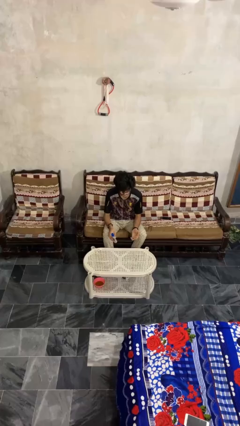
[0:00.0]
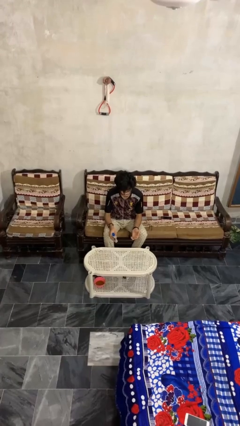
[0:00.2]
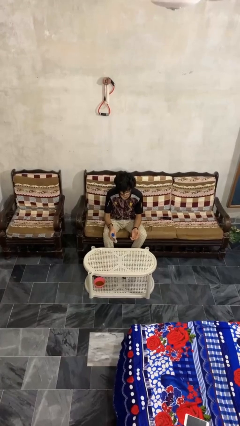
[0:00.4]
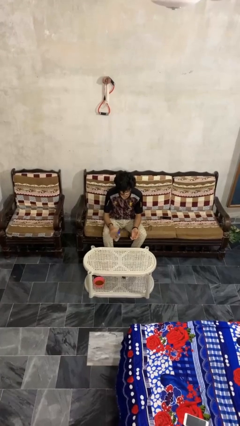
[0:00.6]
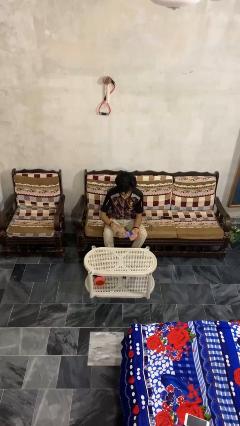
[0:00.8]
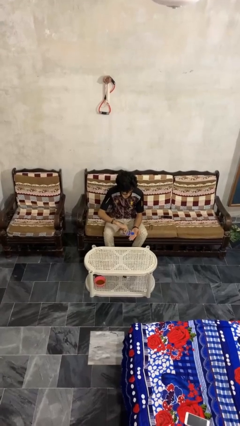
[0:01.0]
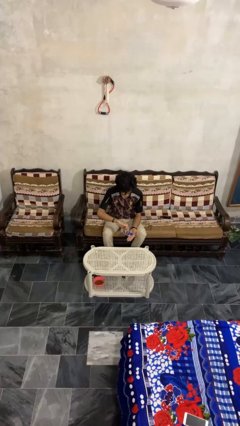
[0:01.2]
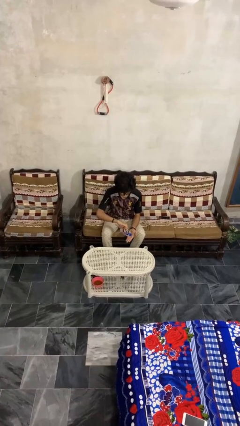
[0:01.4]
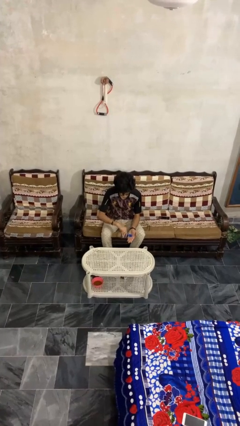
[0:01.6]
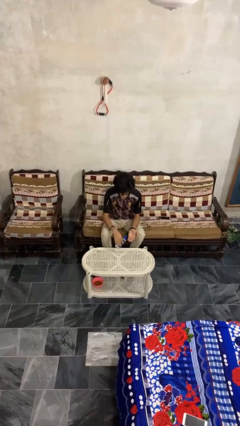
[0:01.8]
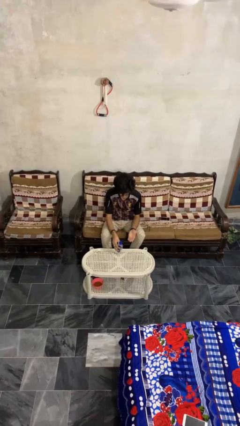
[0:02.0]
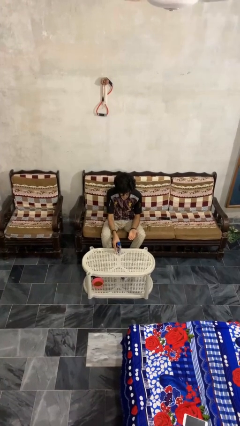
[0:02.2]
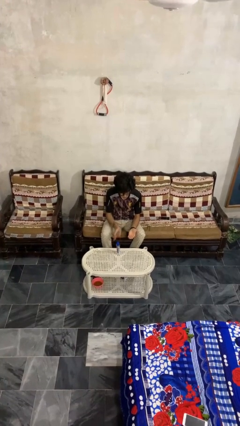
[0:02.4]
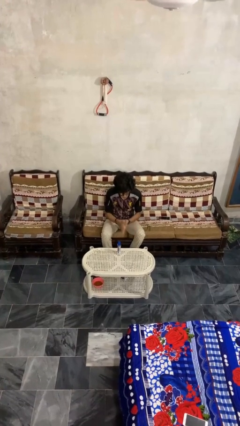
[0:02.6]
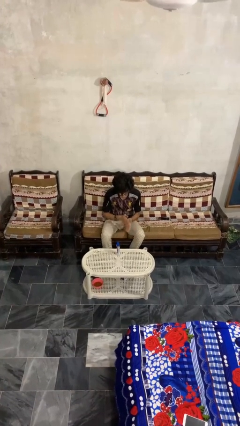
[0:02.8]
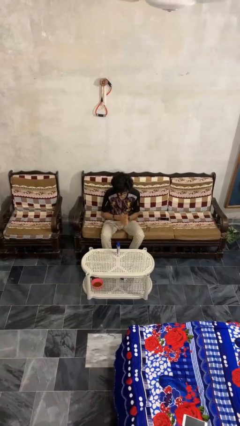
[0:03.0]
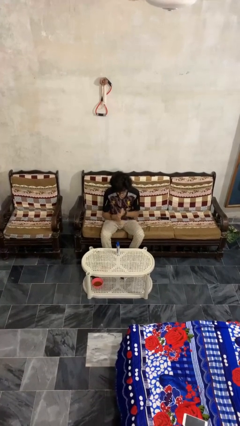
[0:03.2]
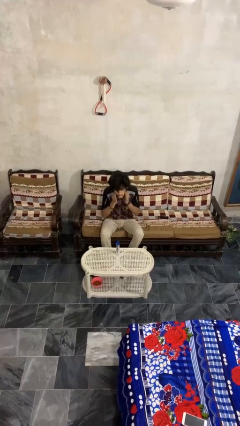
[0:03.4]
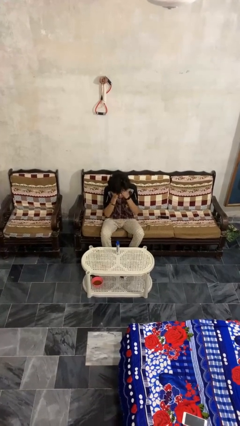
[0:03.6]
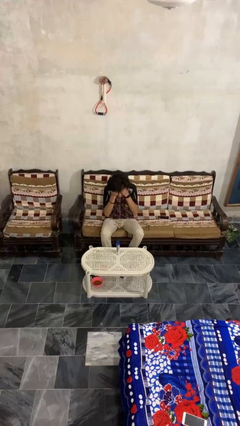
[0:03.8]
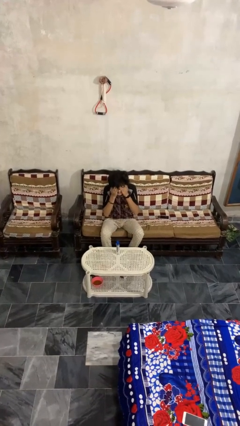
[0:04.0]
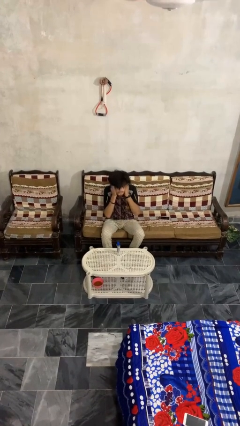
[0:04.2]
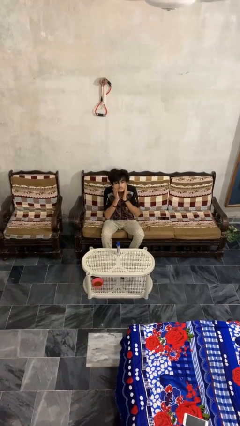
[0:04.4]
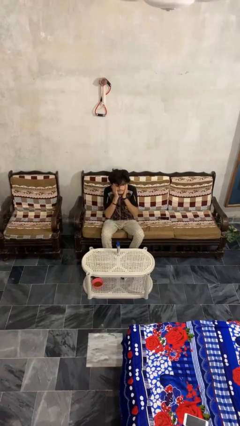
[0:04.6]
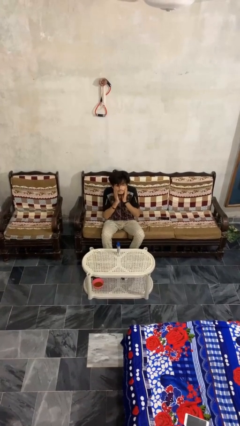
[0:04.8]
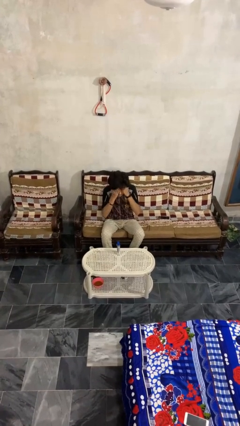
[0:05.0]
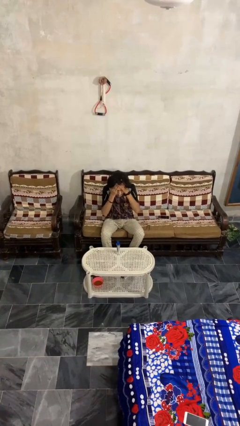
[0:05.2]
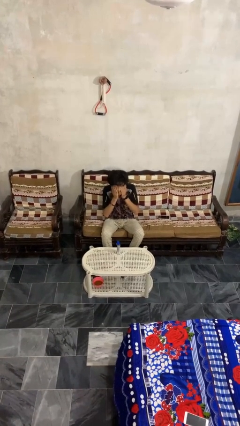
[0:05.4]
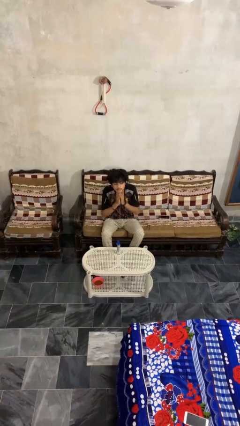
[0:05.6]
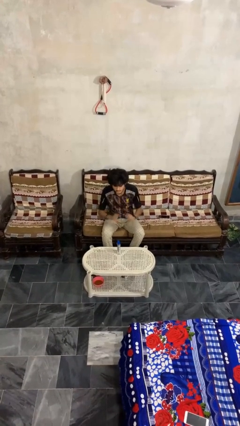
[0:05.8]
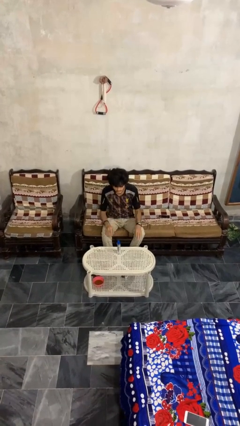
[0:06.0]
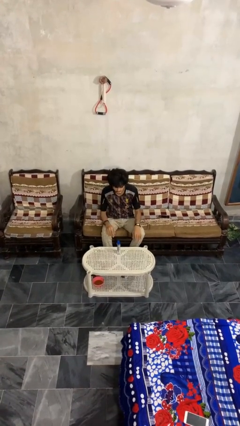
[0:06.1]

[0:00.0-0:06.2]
person applies facial moisturizer

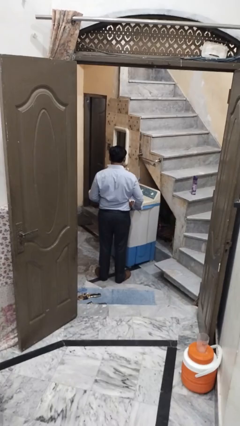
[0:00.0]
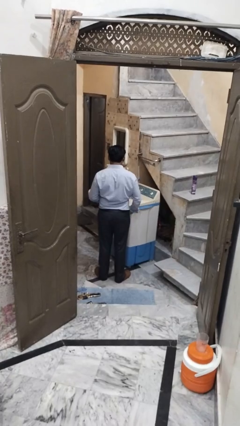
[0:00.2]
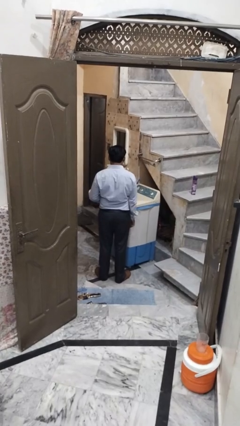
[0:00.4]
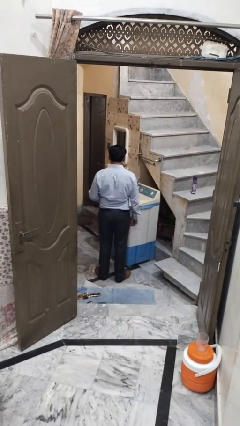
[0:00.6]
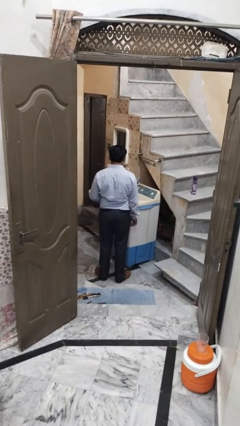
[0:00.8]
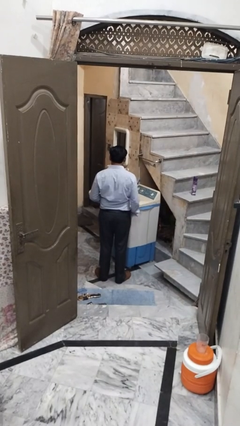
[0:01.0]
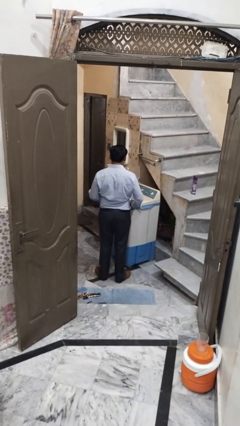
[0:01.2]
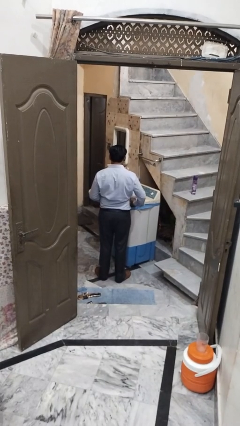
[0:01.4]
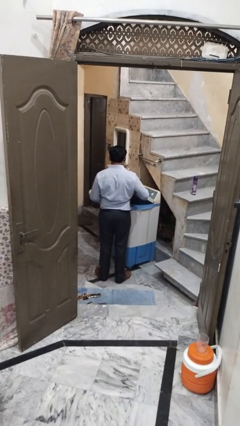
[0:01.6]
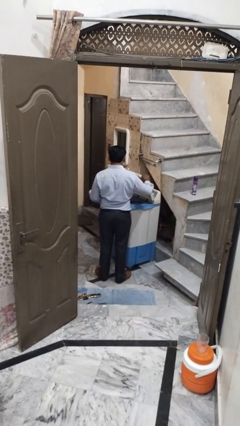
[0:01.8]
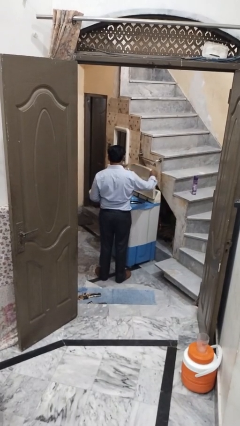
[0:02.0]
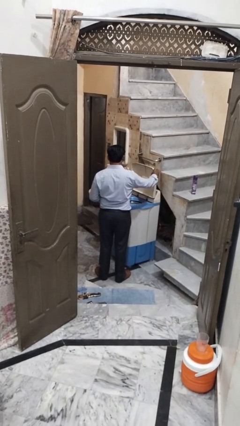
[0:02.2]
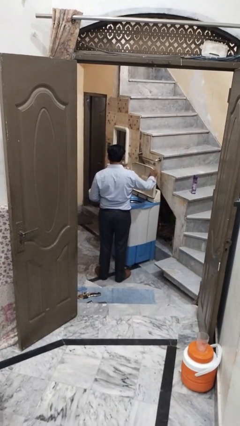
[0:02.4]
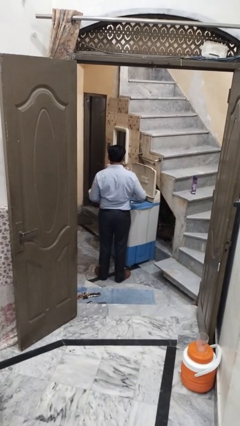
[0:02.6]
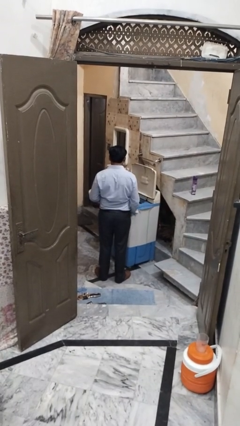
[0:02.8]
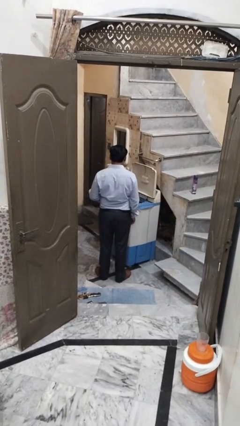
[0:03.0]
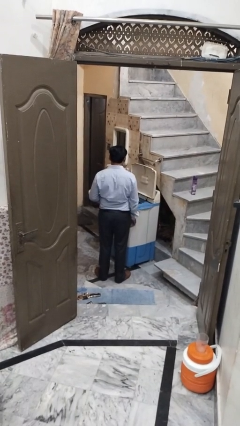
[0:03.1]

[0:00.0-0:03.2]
person opens clothes washer

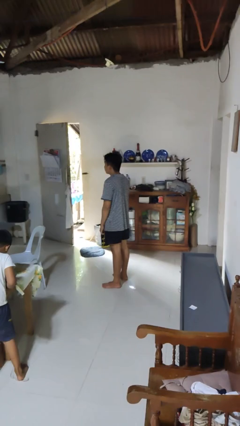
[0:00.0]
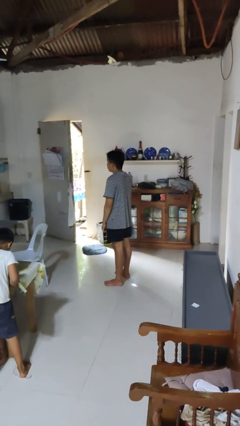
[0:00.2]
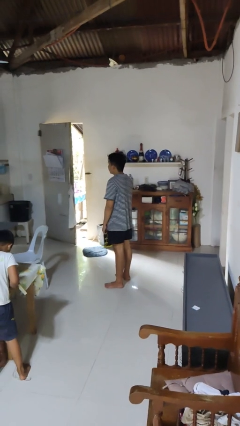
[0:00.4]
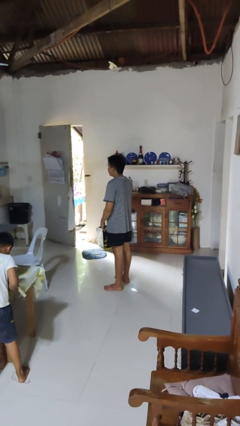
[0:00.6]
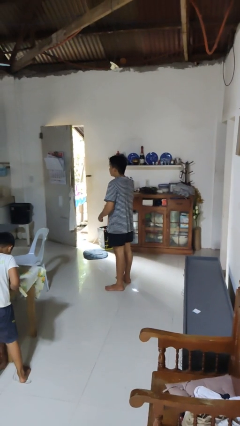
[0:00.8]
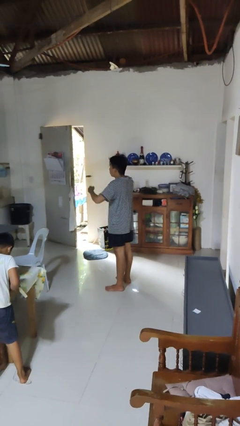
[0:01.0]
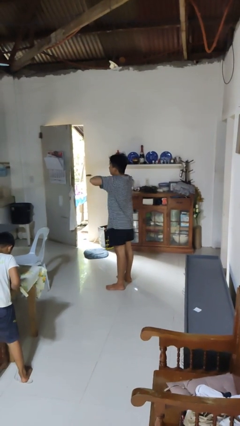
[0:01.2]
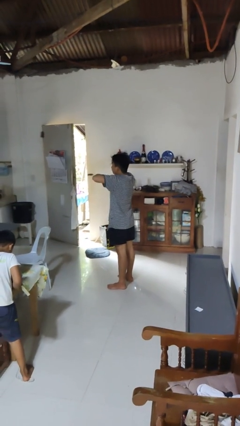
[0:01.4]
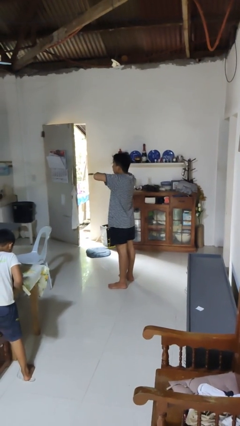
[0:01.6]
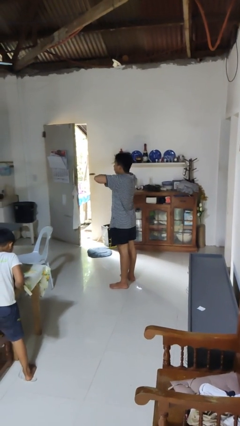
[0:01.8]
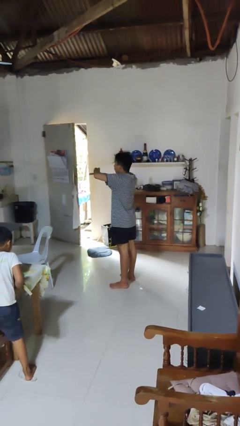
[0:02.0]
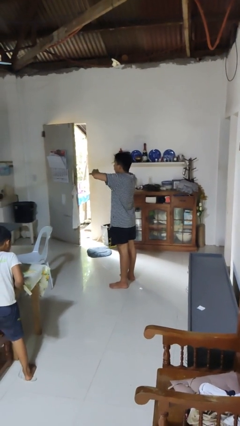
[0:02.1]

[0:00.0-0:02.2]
person drums on chest

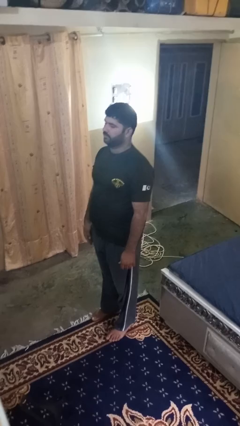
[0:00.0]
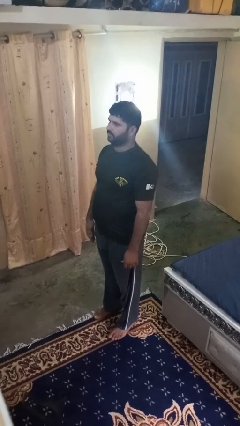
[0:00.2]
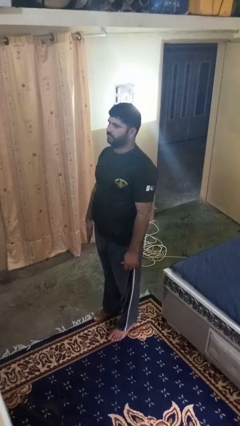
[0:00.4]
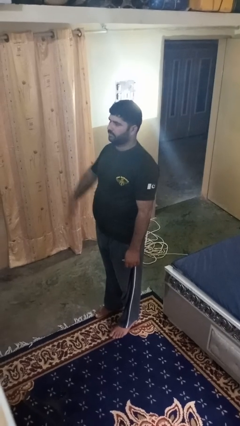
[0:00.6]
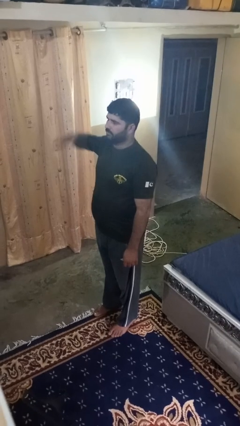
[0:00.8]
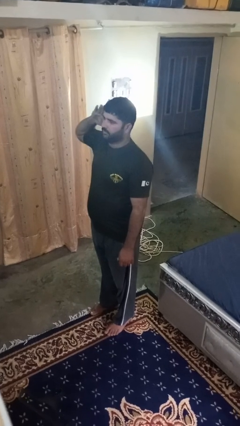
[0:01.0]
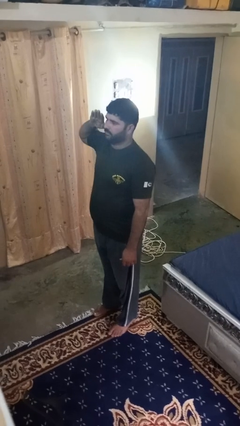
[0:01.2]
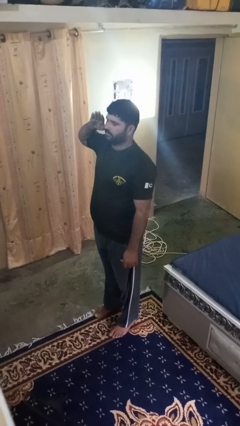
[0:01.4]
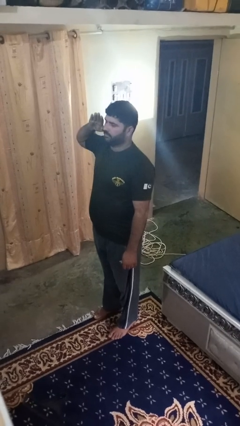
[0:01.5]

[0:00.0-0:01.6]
person salutes

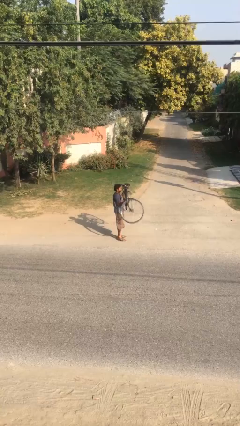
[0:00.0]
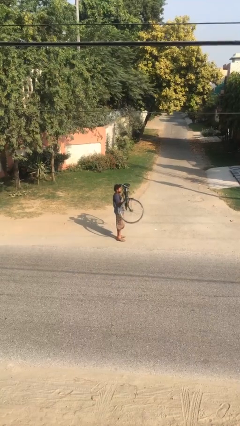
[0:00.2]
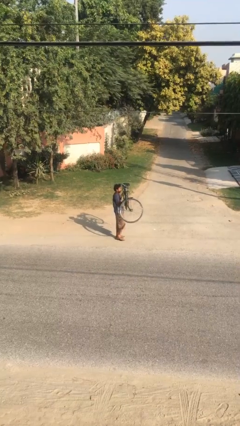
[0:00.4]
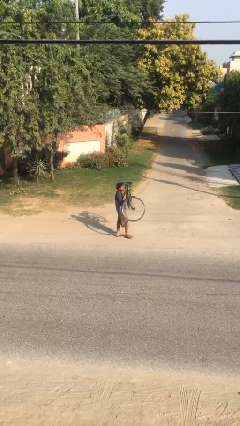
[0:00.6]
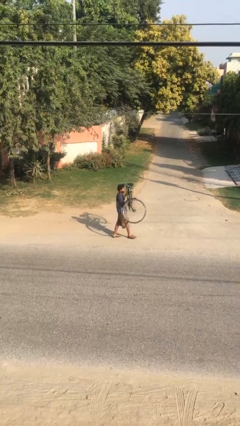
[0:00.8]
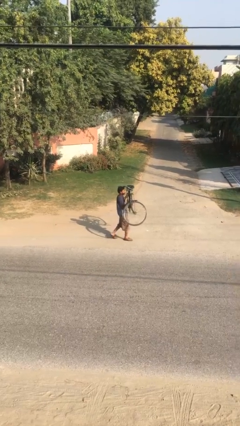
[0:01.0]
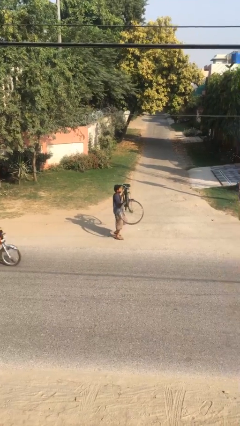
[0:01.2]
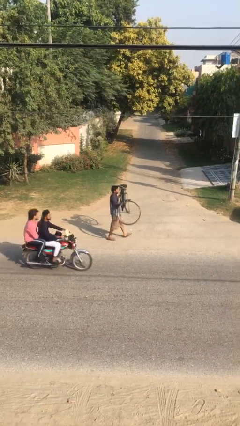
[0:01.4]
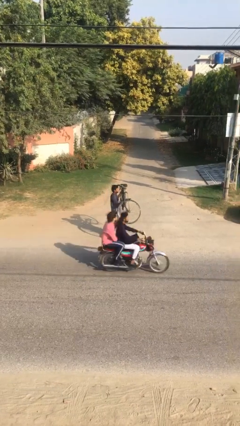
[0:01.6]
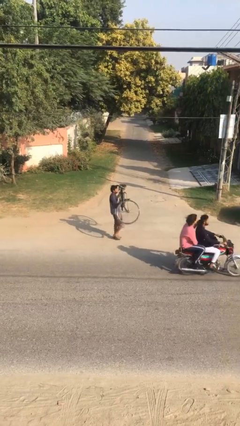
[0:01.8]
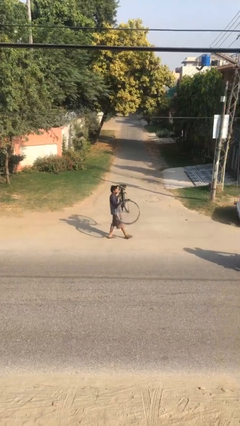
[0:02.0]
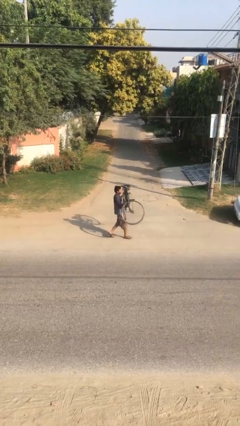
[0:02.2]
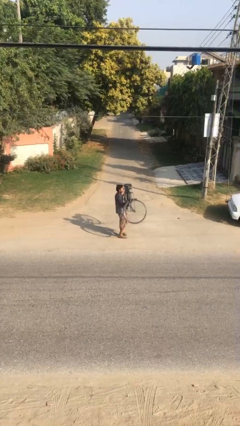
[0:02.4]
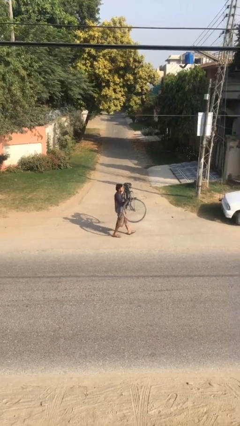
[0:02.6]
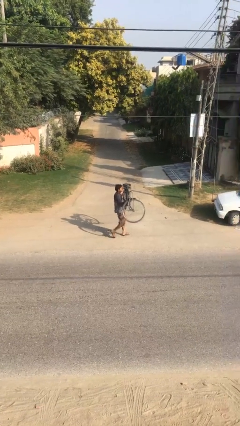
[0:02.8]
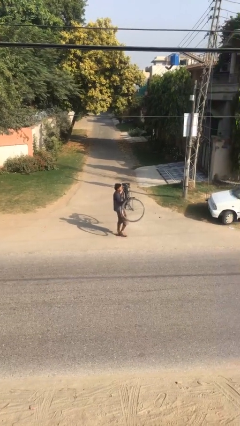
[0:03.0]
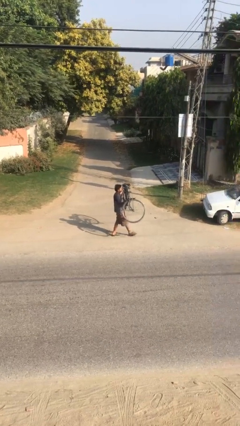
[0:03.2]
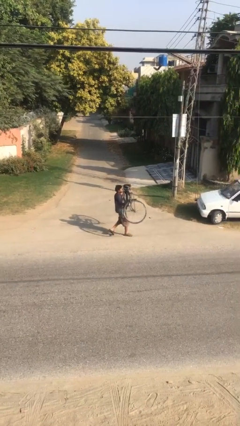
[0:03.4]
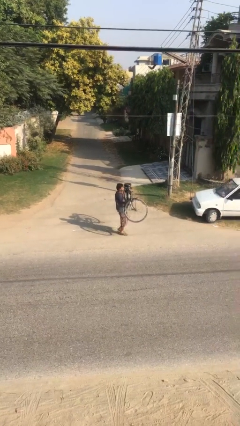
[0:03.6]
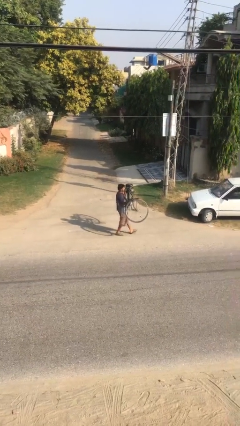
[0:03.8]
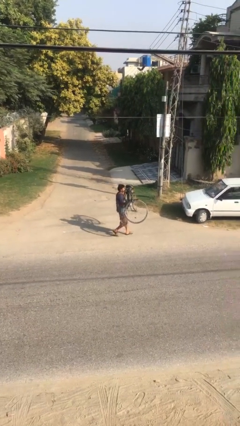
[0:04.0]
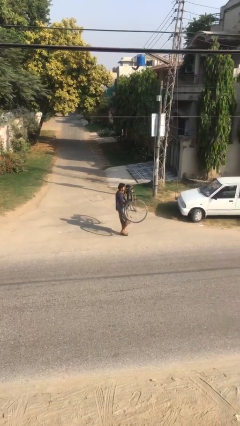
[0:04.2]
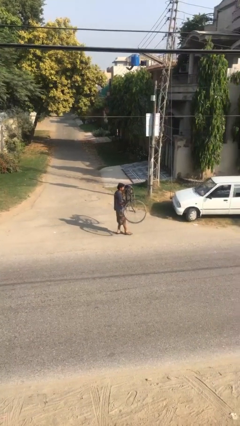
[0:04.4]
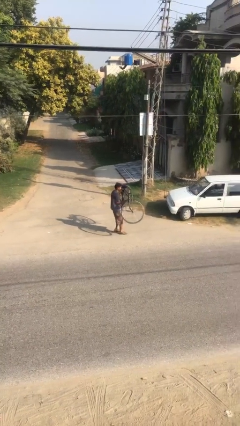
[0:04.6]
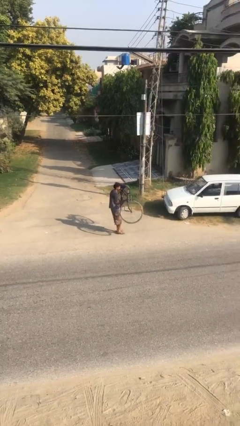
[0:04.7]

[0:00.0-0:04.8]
person carries heavy object
